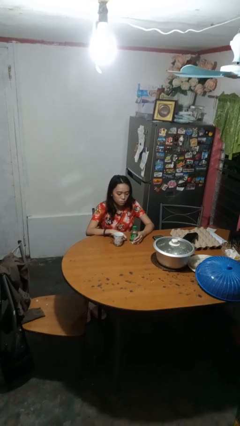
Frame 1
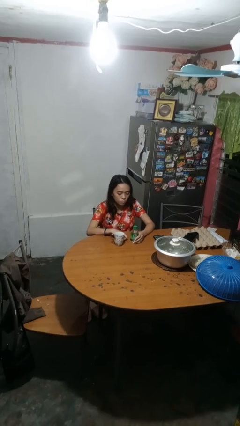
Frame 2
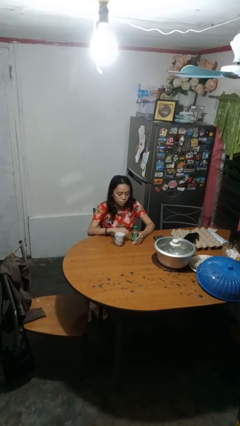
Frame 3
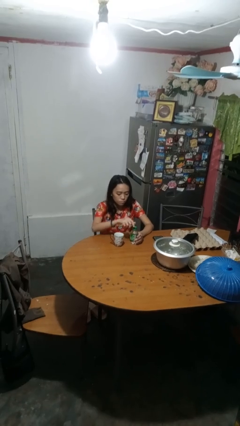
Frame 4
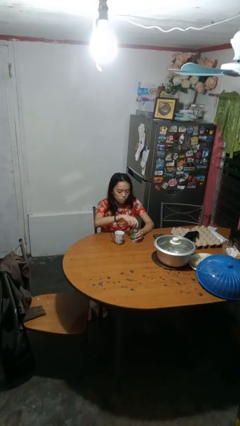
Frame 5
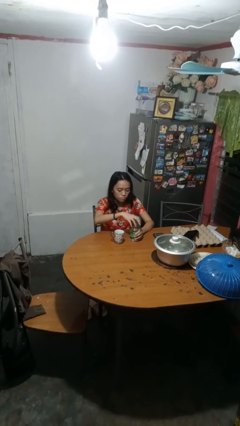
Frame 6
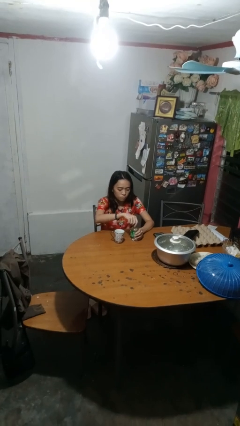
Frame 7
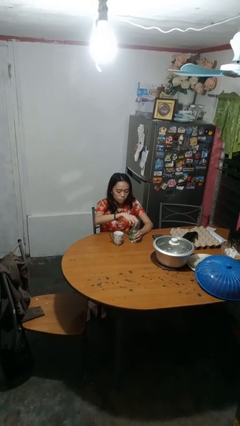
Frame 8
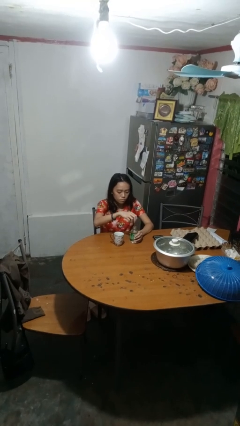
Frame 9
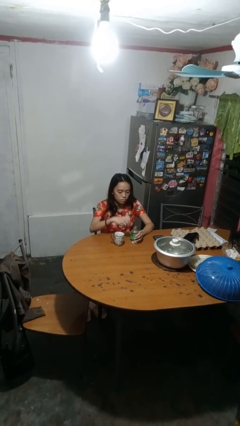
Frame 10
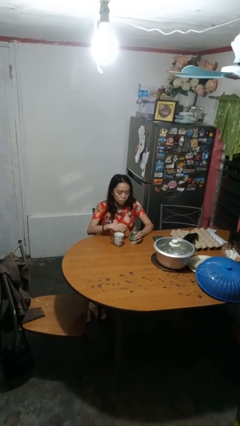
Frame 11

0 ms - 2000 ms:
person unscrews lid from bottle

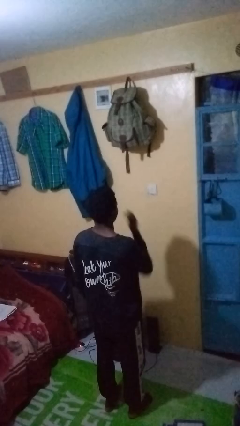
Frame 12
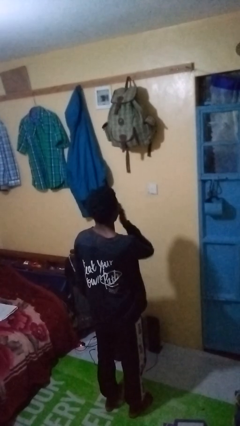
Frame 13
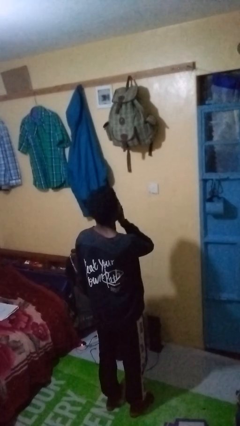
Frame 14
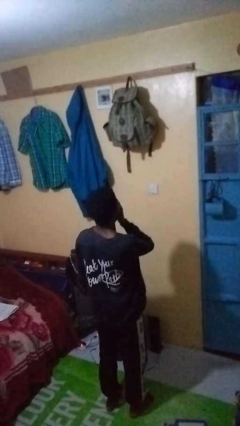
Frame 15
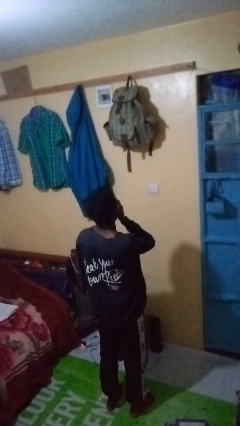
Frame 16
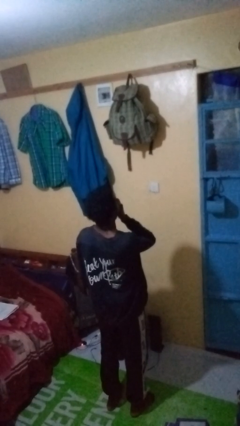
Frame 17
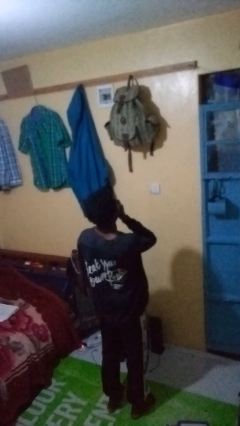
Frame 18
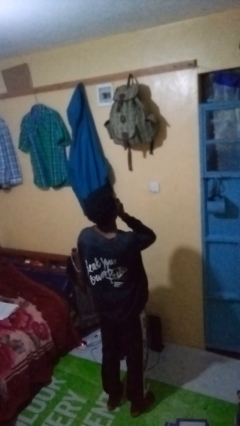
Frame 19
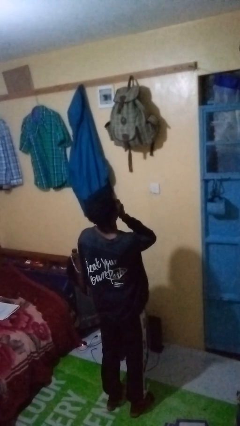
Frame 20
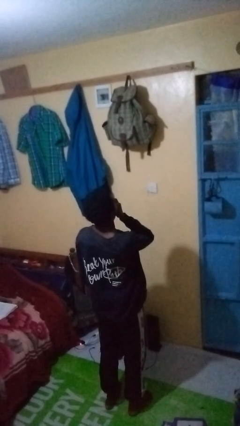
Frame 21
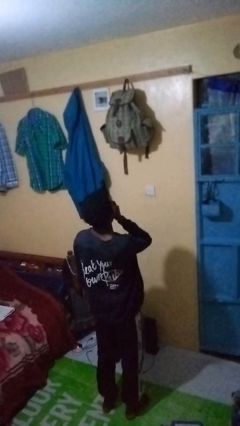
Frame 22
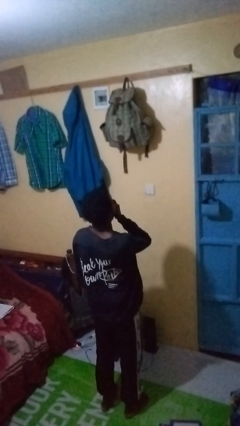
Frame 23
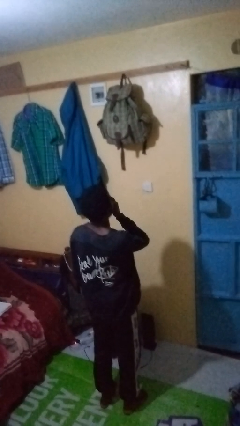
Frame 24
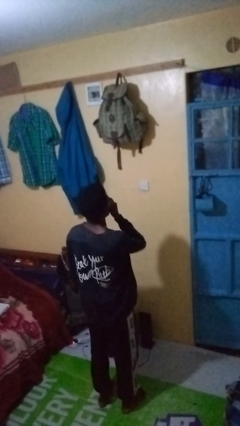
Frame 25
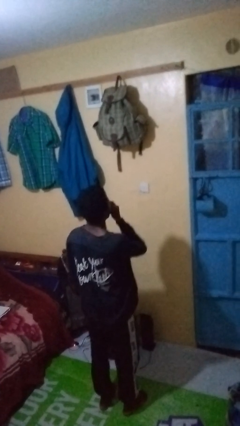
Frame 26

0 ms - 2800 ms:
person yawns

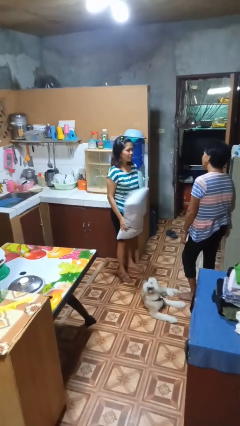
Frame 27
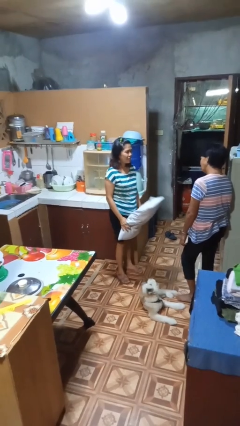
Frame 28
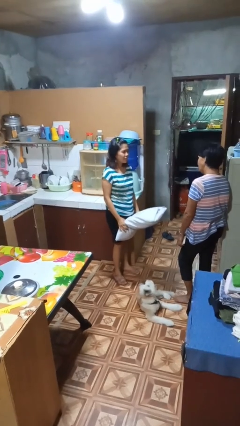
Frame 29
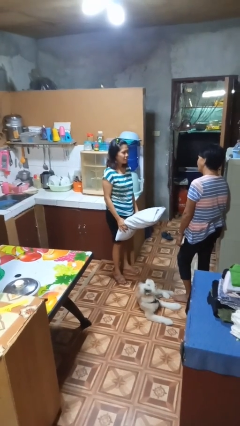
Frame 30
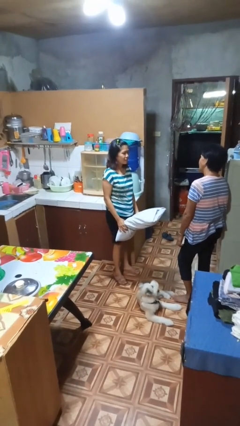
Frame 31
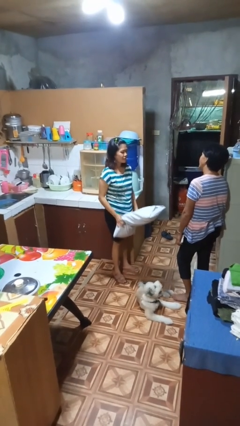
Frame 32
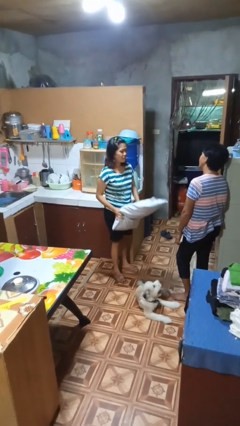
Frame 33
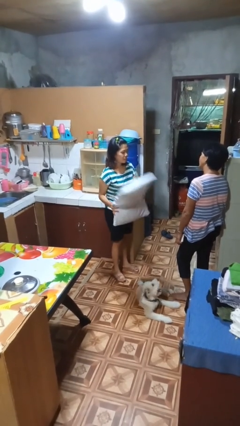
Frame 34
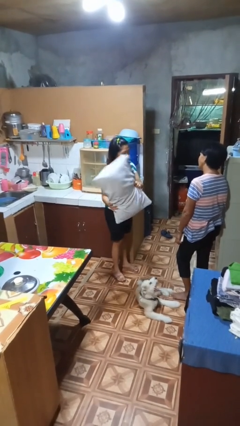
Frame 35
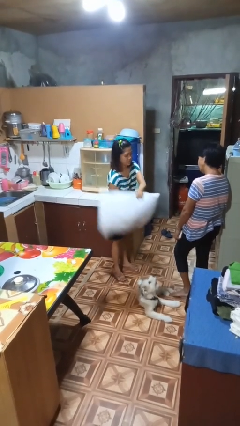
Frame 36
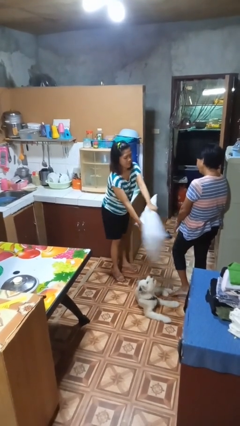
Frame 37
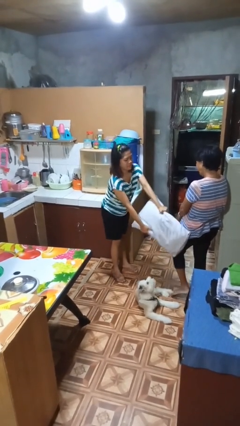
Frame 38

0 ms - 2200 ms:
person hits person with pillow

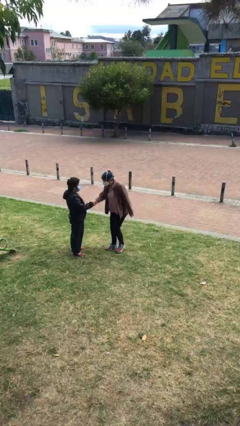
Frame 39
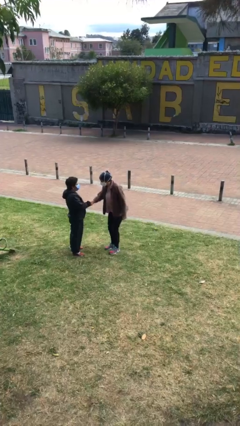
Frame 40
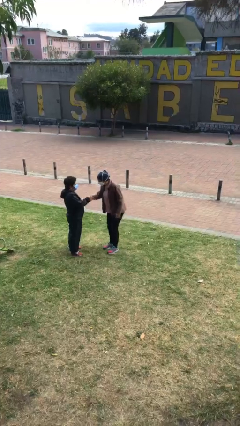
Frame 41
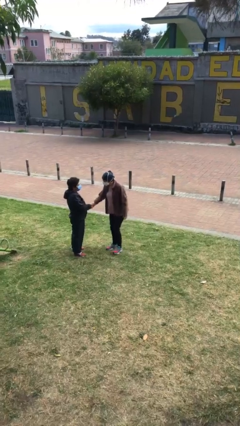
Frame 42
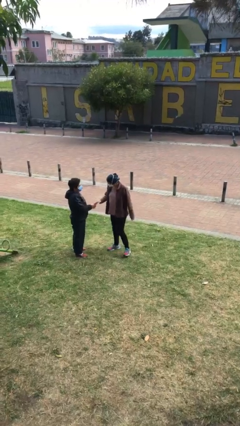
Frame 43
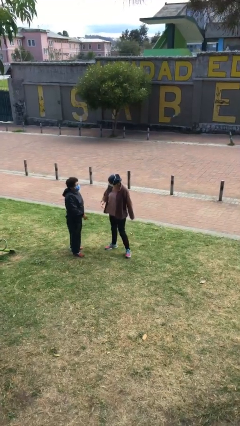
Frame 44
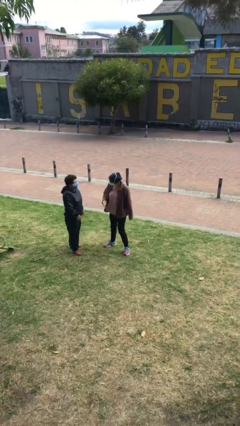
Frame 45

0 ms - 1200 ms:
person shakes hand

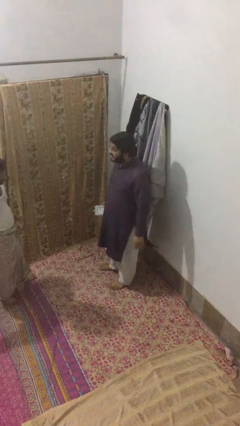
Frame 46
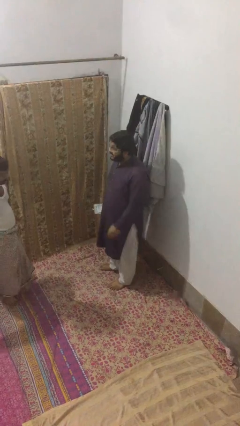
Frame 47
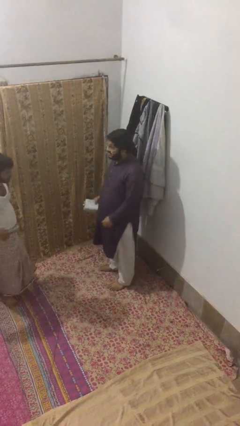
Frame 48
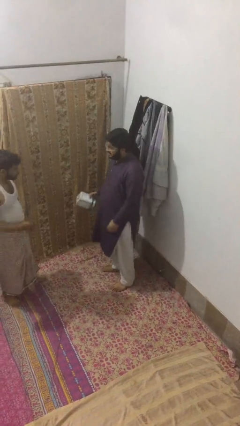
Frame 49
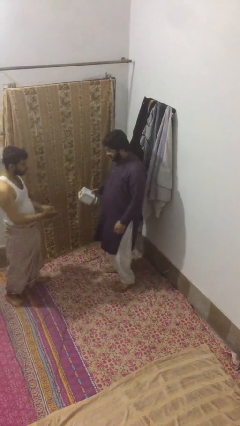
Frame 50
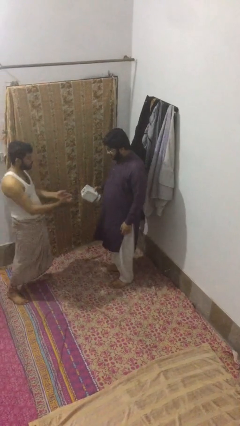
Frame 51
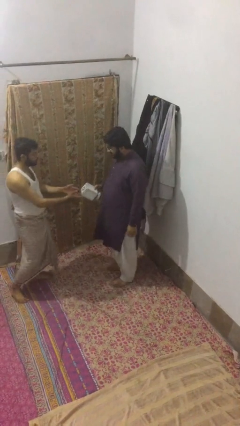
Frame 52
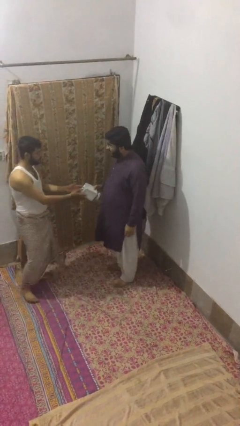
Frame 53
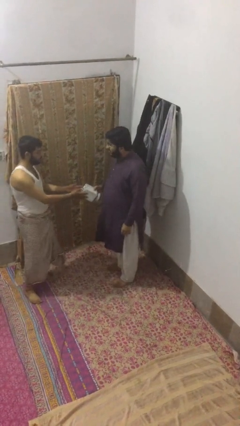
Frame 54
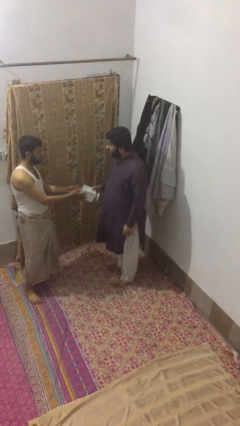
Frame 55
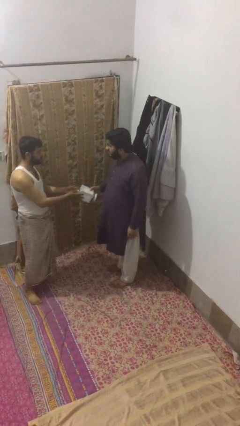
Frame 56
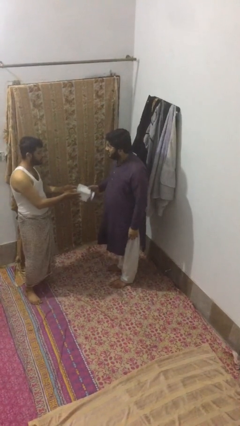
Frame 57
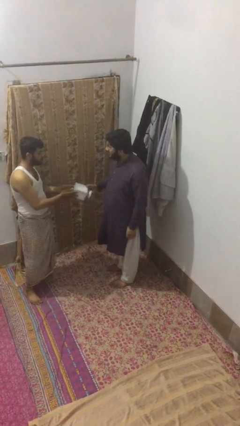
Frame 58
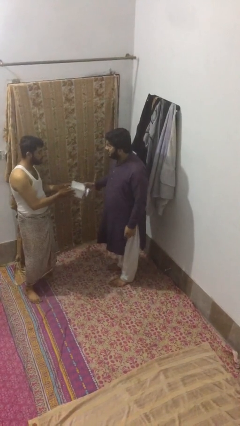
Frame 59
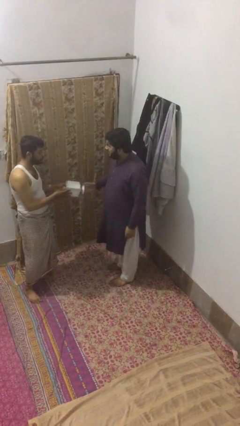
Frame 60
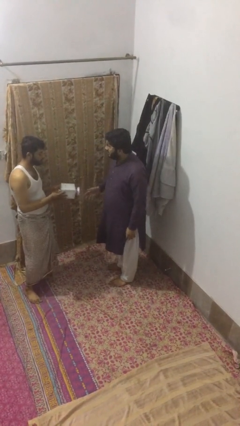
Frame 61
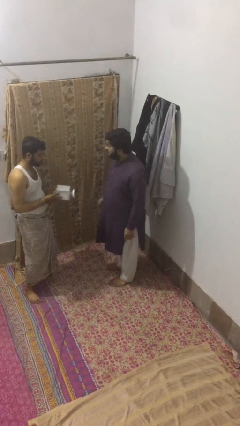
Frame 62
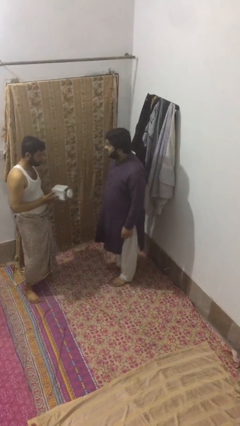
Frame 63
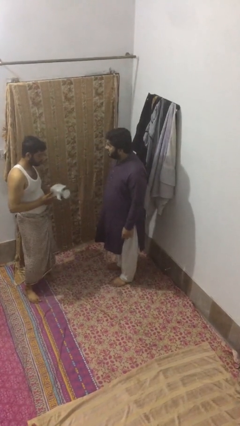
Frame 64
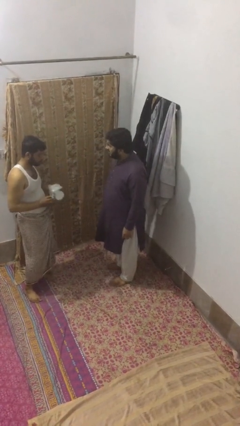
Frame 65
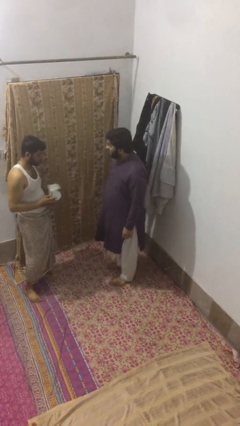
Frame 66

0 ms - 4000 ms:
person transfers object to person

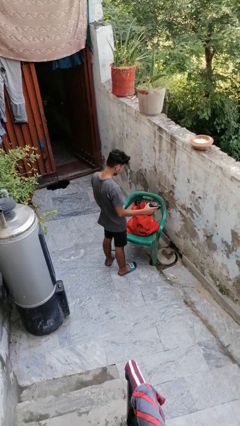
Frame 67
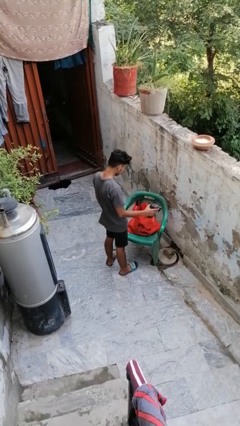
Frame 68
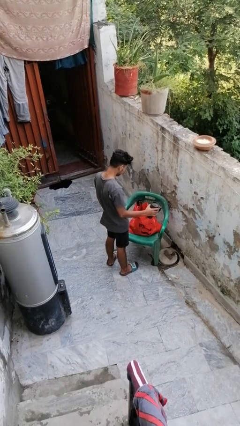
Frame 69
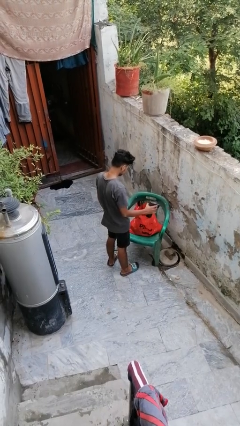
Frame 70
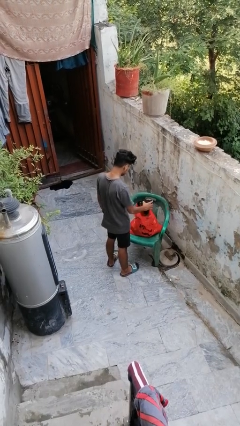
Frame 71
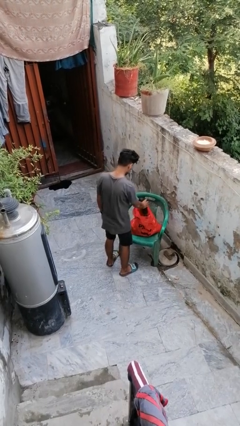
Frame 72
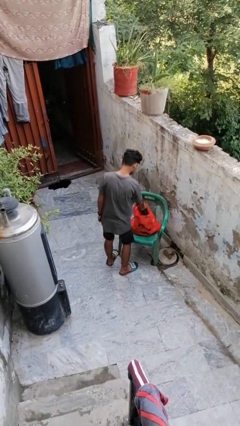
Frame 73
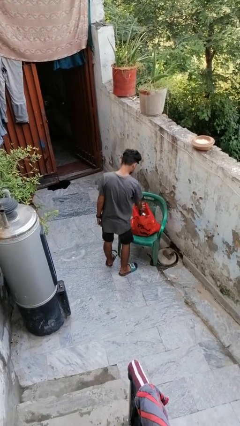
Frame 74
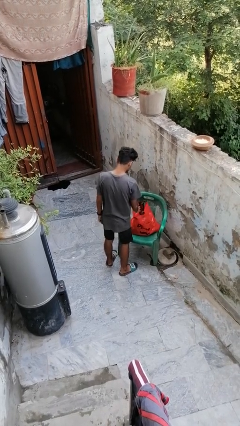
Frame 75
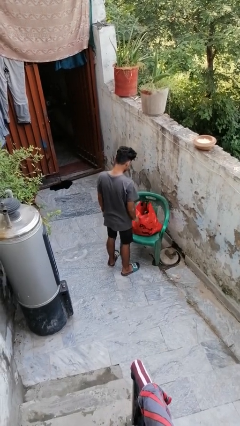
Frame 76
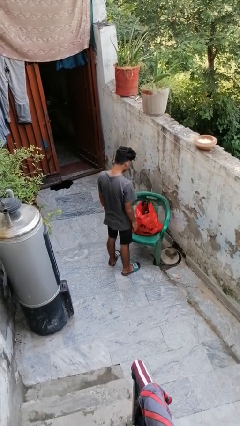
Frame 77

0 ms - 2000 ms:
person puts object into bag

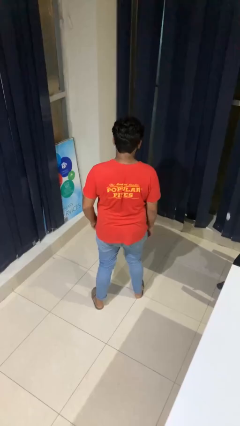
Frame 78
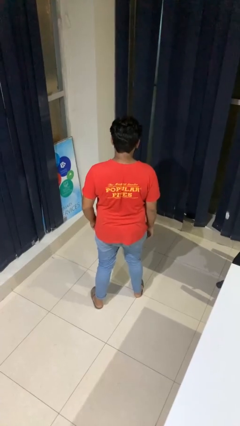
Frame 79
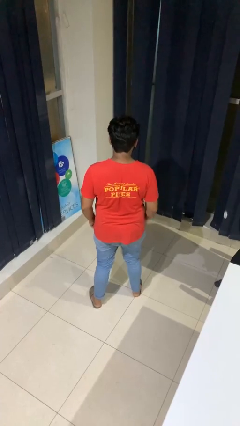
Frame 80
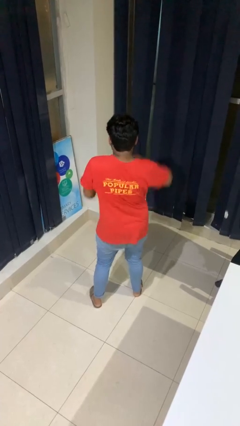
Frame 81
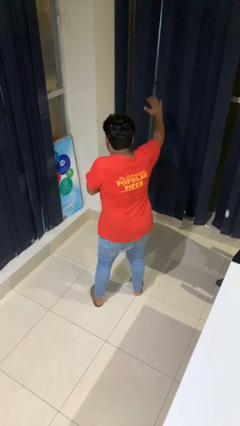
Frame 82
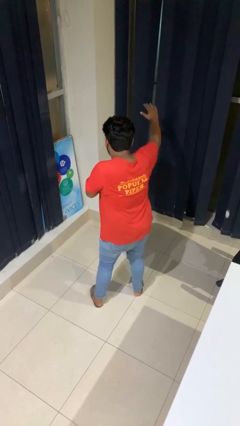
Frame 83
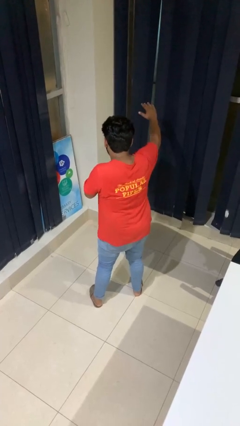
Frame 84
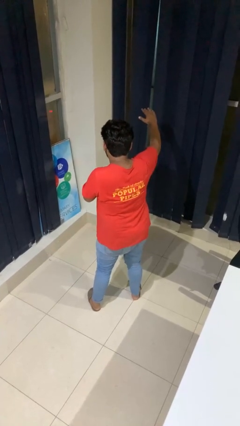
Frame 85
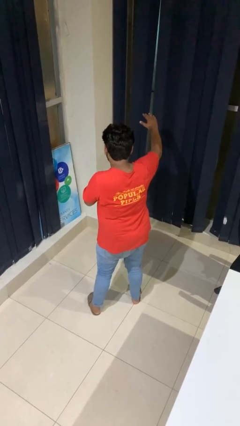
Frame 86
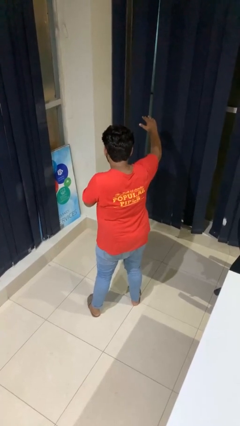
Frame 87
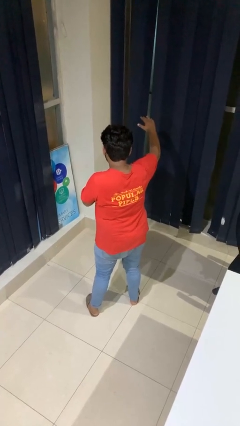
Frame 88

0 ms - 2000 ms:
person karate chop

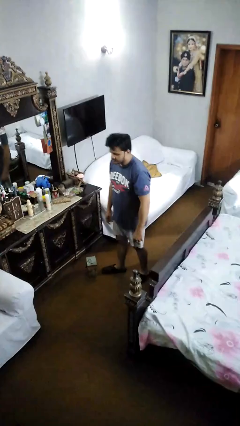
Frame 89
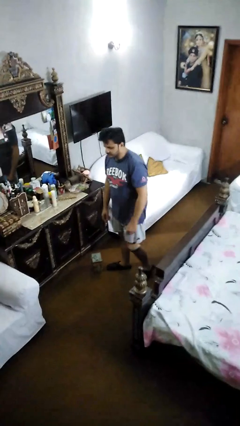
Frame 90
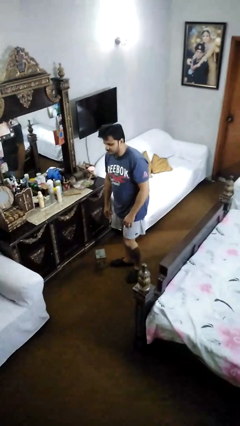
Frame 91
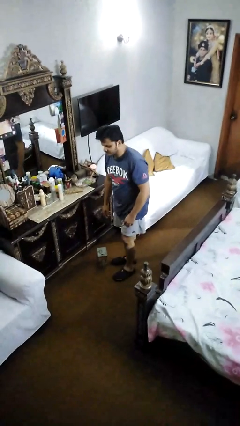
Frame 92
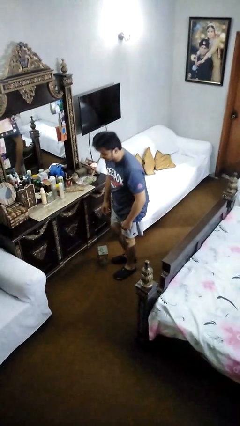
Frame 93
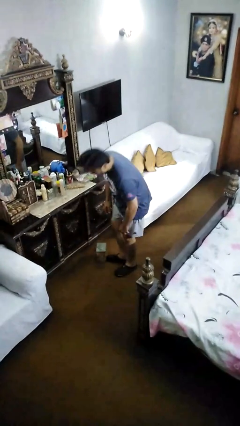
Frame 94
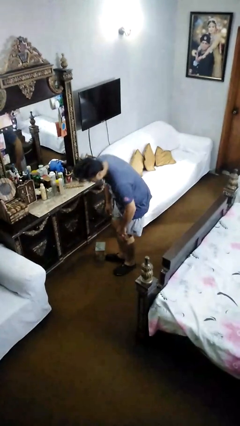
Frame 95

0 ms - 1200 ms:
person trips on object on floor
